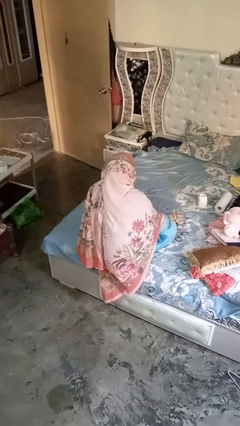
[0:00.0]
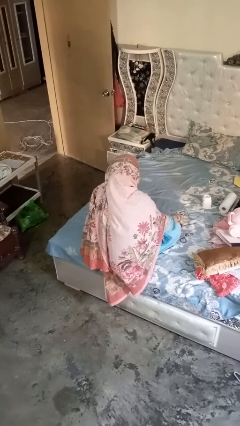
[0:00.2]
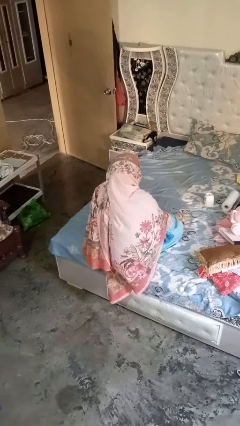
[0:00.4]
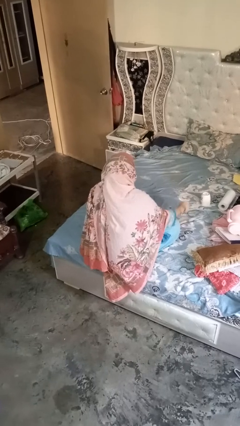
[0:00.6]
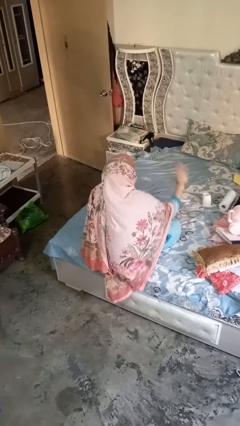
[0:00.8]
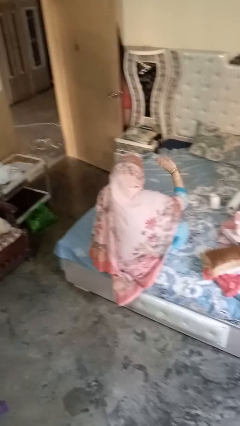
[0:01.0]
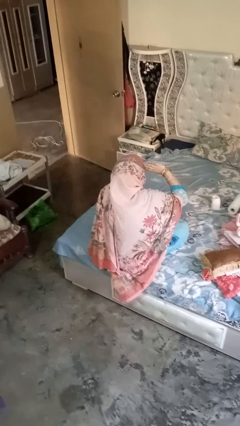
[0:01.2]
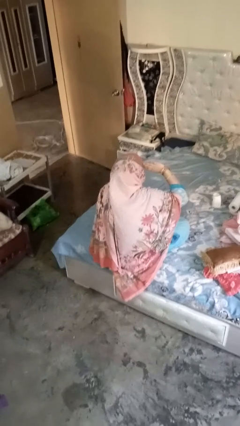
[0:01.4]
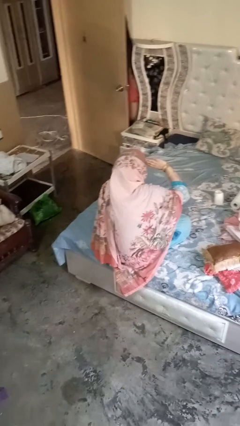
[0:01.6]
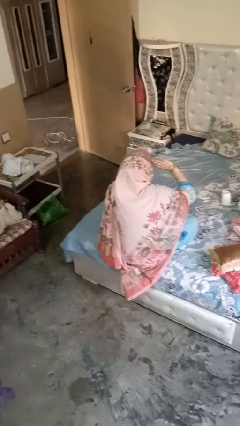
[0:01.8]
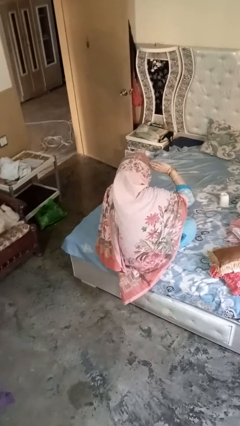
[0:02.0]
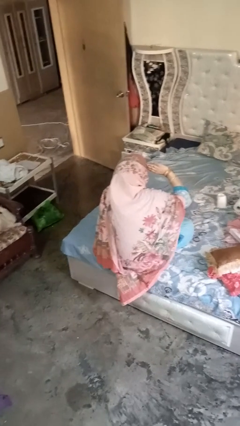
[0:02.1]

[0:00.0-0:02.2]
person salutes

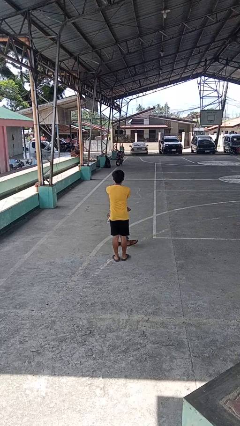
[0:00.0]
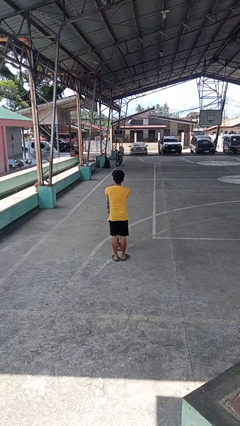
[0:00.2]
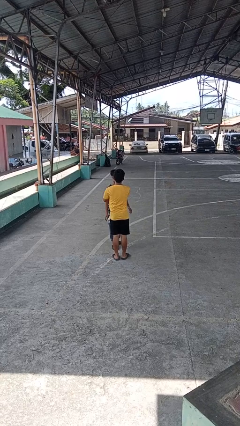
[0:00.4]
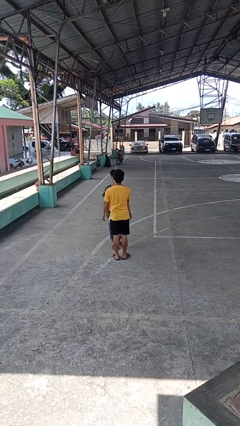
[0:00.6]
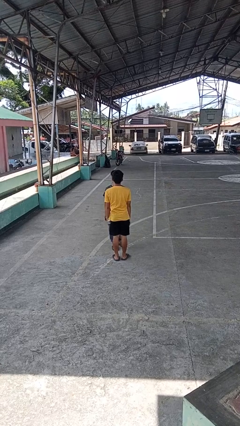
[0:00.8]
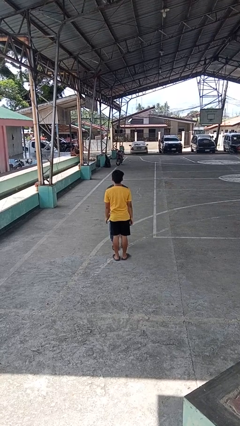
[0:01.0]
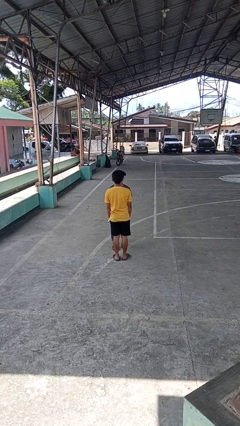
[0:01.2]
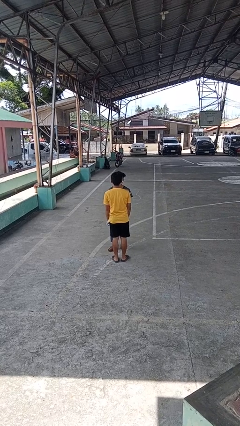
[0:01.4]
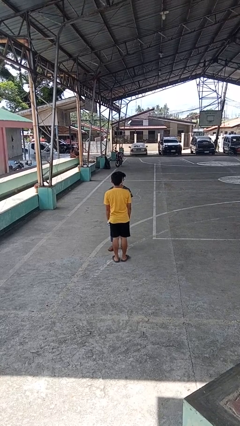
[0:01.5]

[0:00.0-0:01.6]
person spins person around

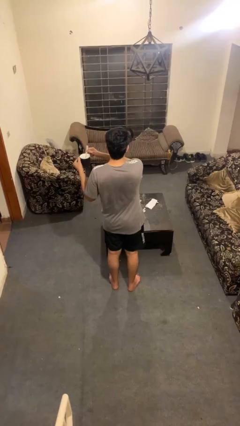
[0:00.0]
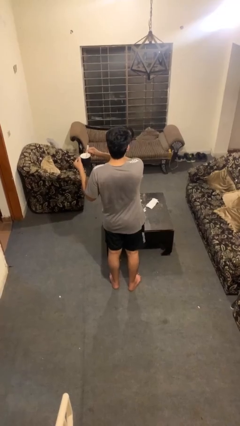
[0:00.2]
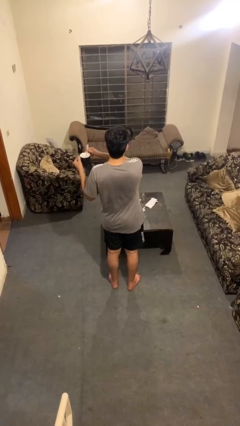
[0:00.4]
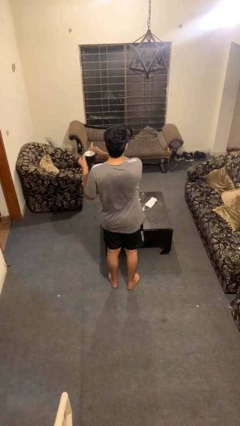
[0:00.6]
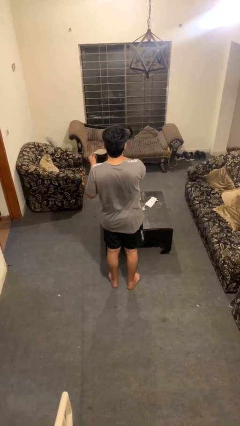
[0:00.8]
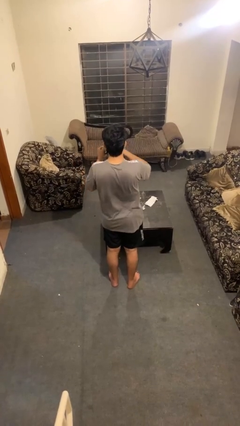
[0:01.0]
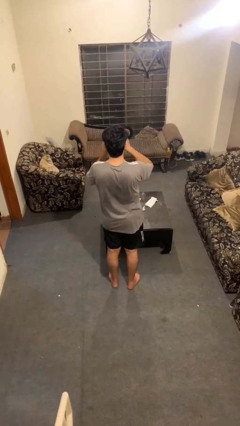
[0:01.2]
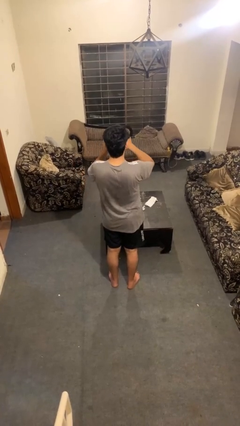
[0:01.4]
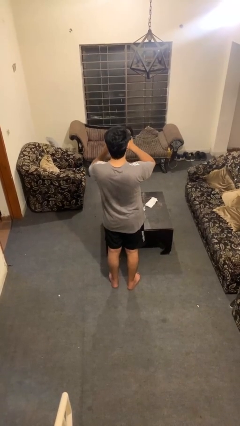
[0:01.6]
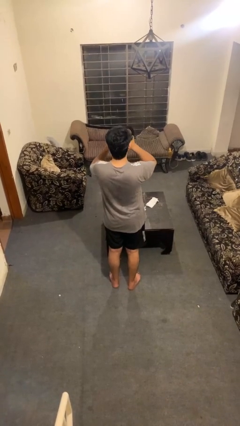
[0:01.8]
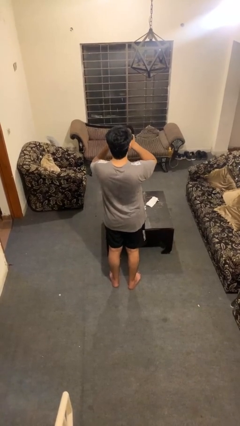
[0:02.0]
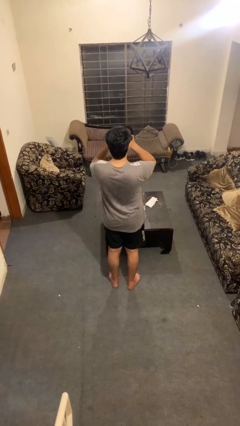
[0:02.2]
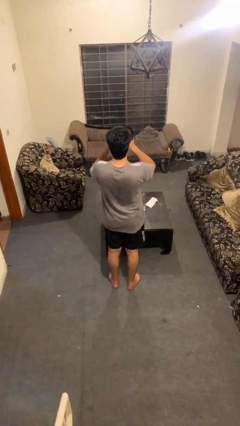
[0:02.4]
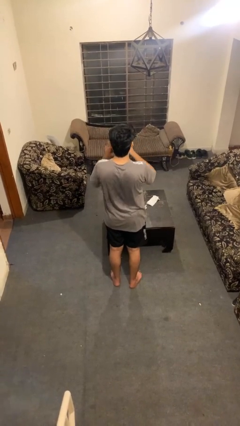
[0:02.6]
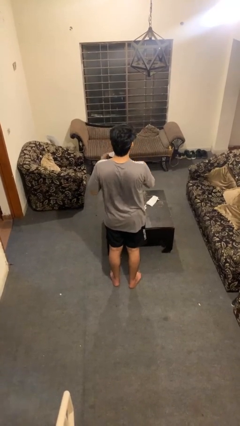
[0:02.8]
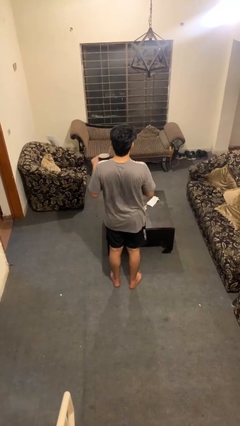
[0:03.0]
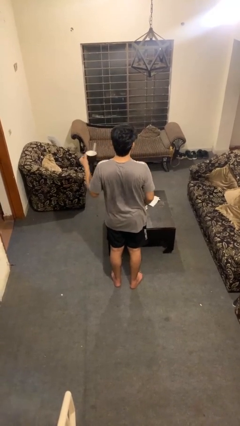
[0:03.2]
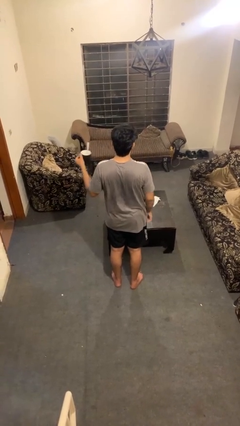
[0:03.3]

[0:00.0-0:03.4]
person drinks from mug

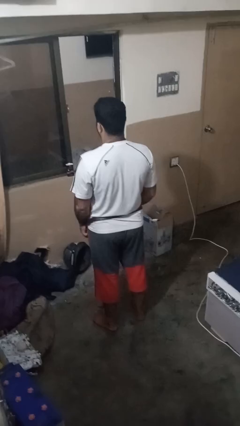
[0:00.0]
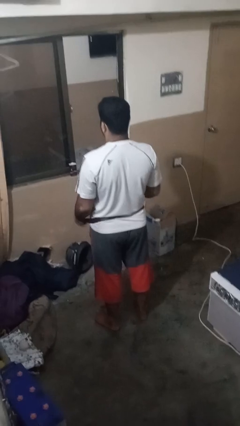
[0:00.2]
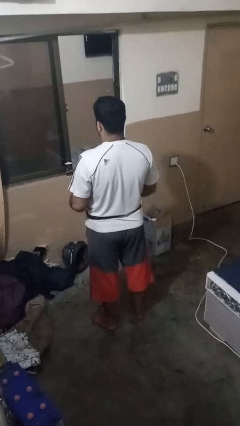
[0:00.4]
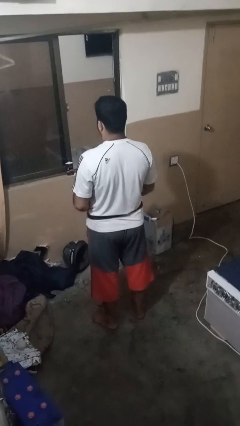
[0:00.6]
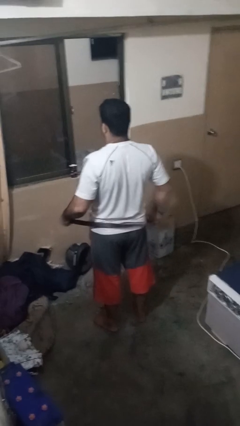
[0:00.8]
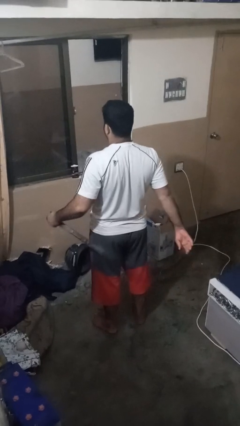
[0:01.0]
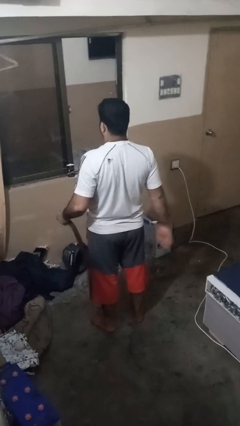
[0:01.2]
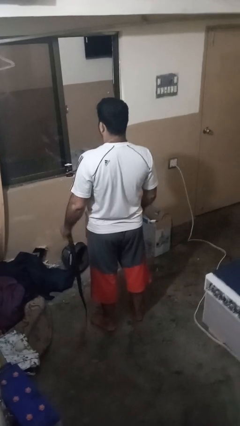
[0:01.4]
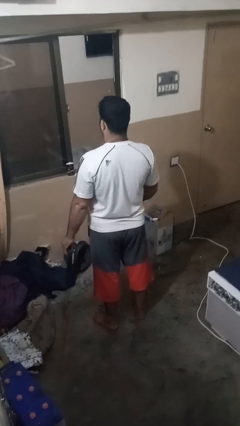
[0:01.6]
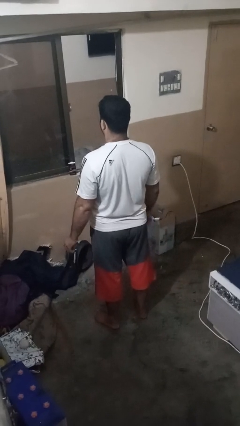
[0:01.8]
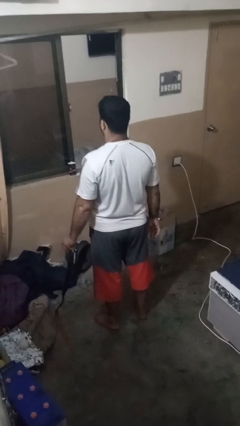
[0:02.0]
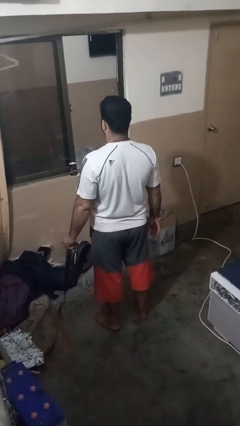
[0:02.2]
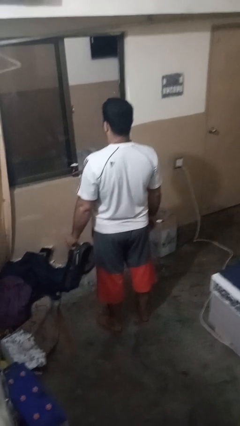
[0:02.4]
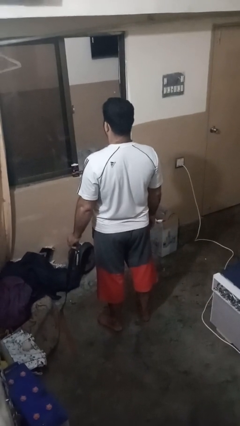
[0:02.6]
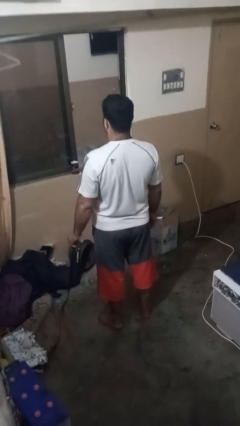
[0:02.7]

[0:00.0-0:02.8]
person takes off belt

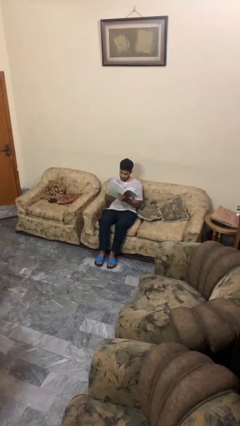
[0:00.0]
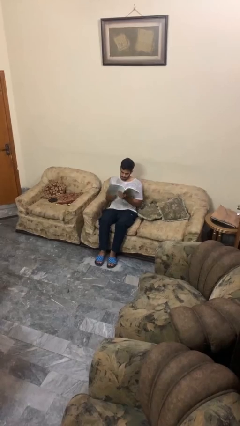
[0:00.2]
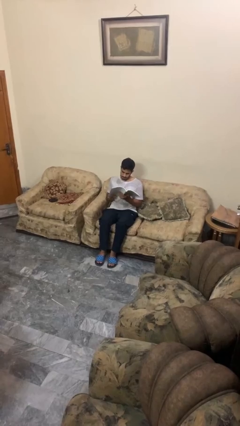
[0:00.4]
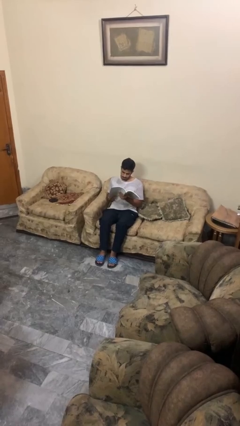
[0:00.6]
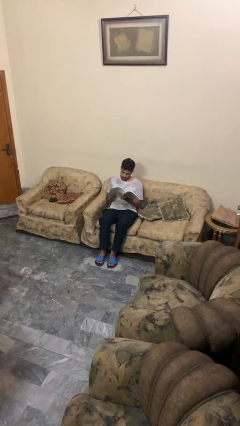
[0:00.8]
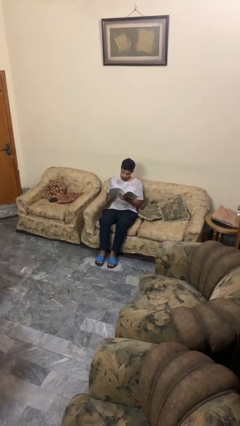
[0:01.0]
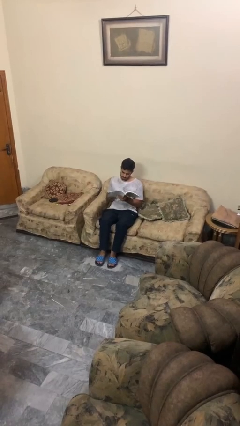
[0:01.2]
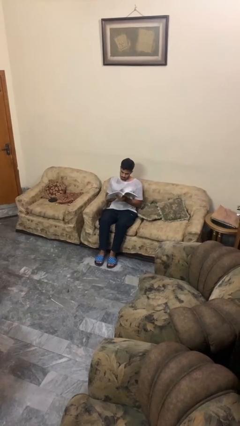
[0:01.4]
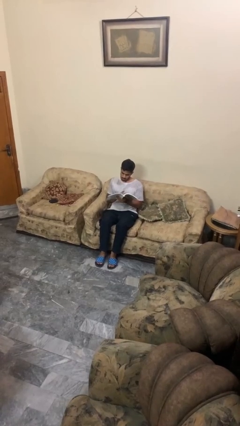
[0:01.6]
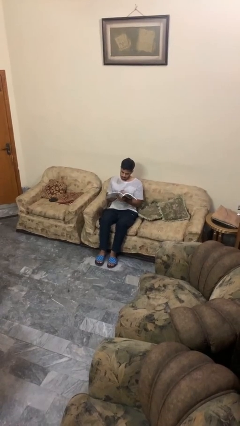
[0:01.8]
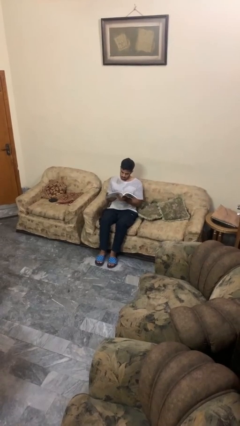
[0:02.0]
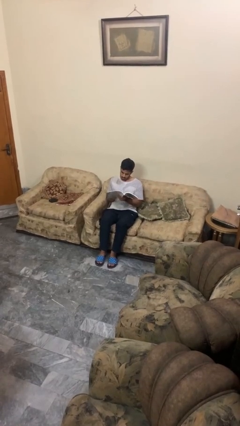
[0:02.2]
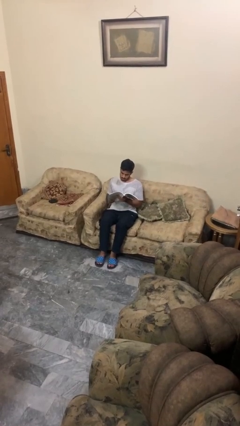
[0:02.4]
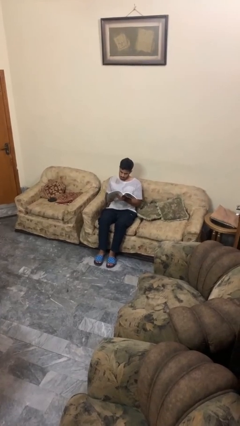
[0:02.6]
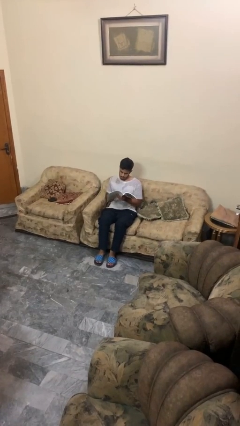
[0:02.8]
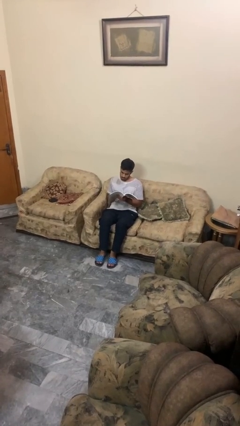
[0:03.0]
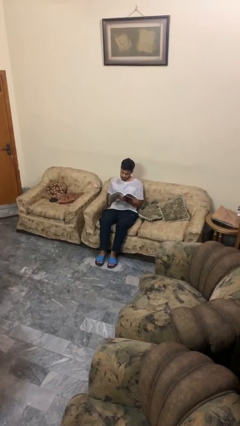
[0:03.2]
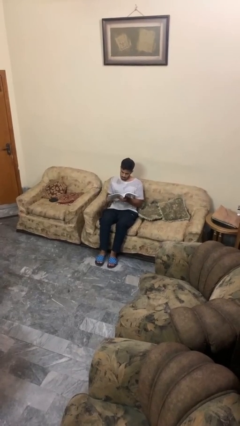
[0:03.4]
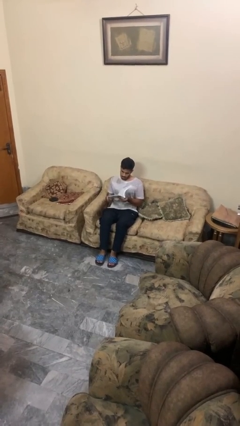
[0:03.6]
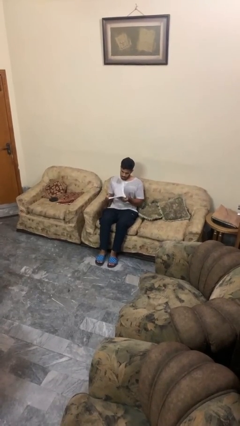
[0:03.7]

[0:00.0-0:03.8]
person reads book

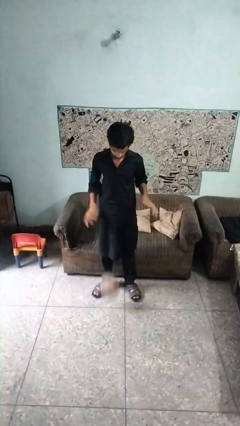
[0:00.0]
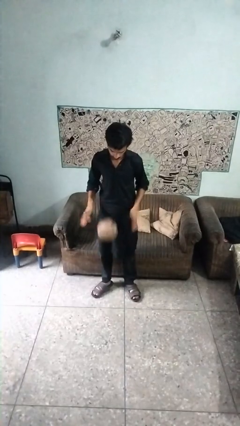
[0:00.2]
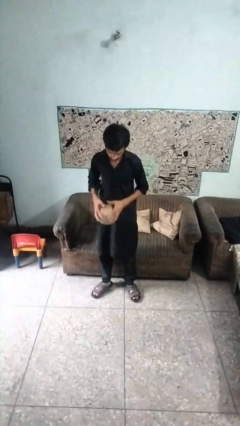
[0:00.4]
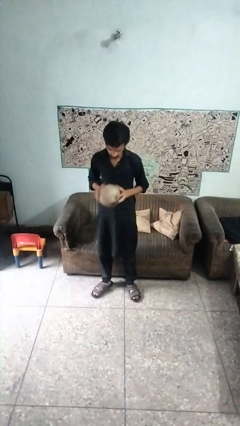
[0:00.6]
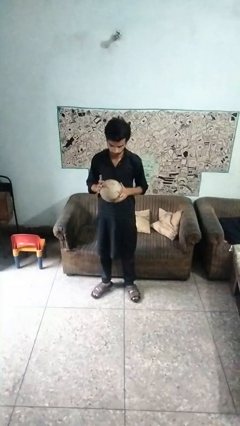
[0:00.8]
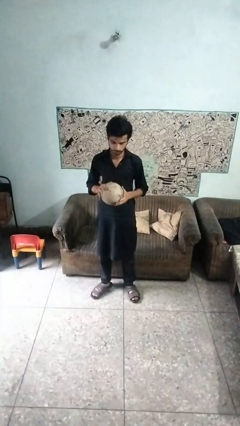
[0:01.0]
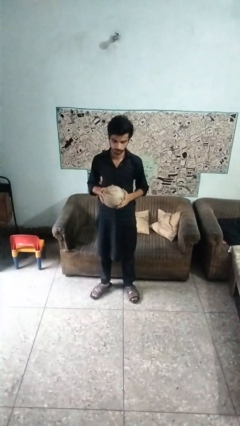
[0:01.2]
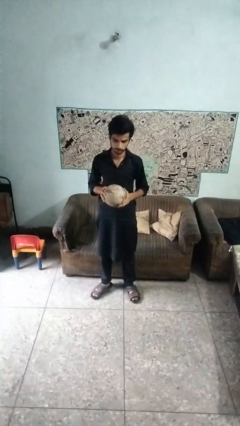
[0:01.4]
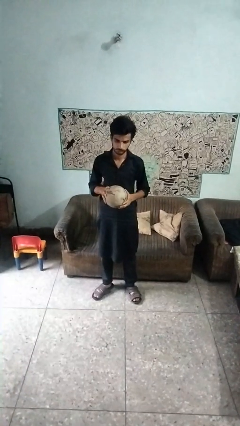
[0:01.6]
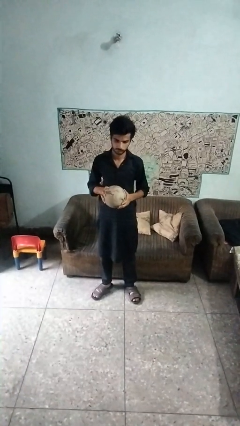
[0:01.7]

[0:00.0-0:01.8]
person takes off hoodie

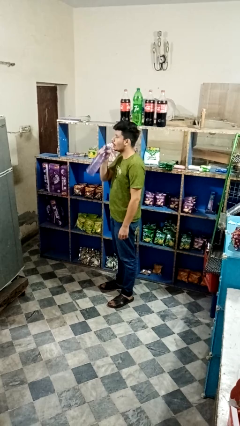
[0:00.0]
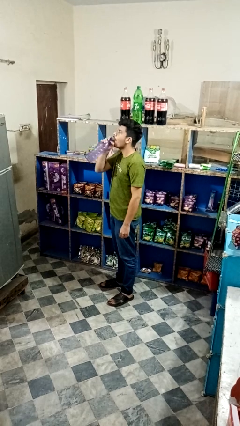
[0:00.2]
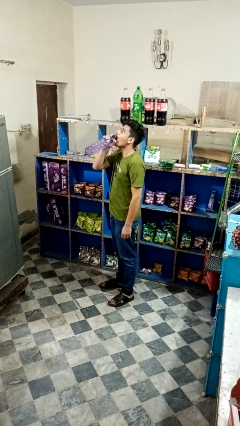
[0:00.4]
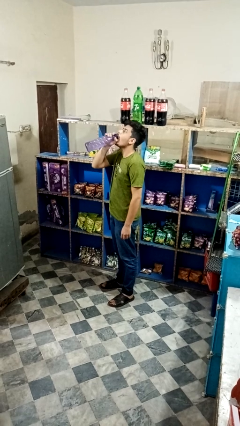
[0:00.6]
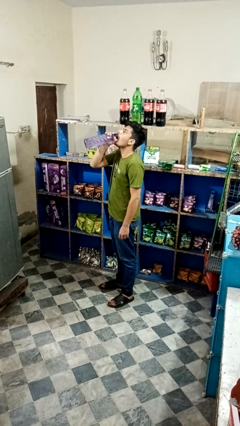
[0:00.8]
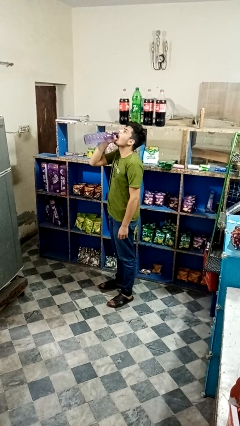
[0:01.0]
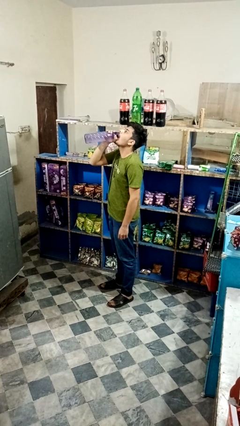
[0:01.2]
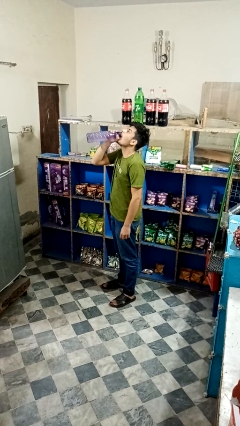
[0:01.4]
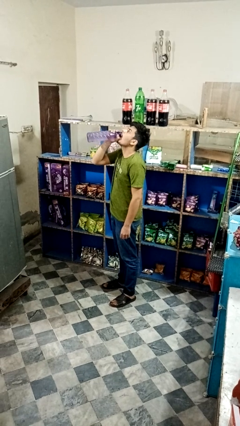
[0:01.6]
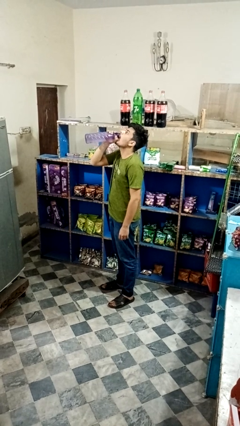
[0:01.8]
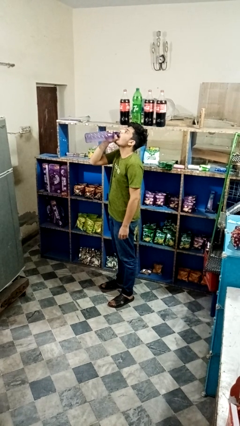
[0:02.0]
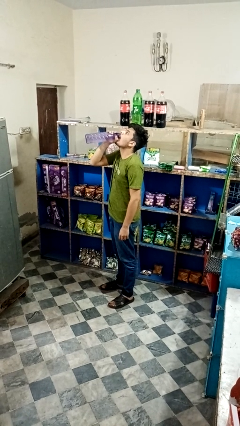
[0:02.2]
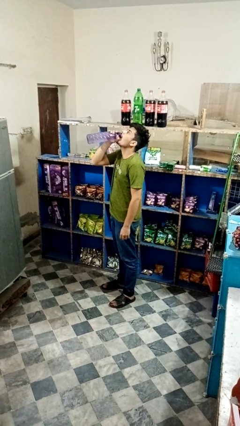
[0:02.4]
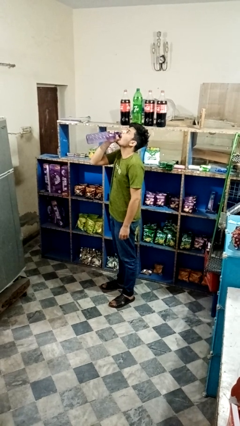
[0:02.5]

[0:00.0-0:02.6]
person drinks from bottle
